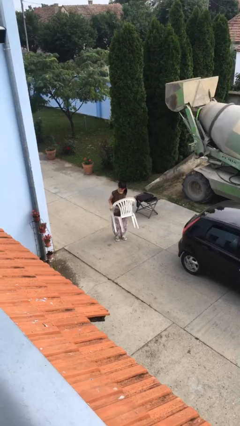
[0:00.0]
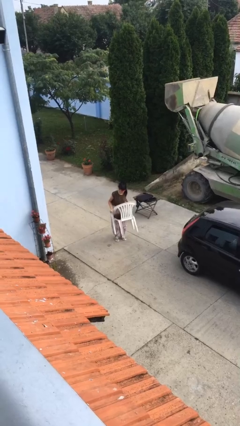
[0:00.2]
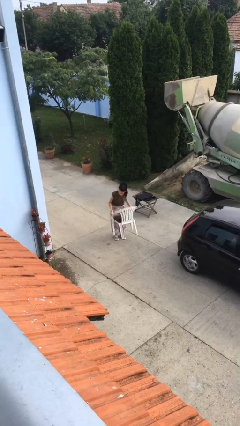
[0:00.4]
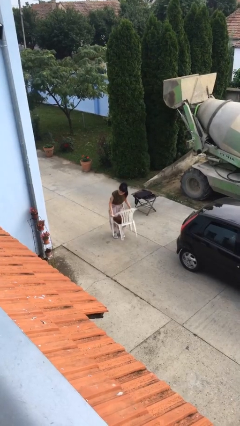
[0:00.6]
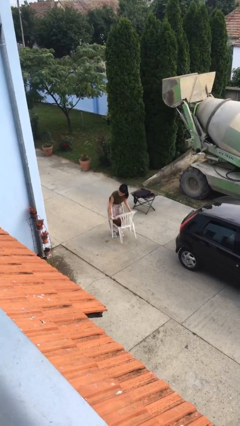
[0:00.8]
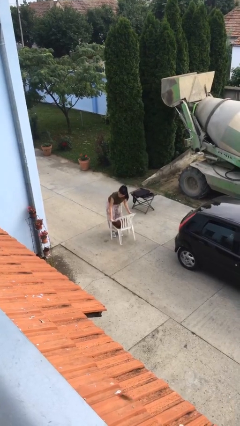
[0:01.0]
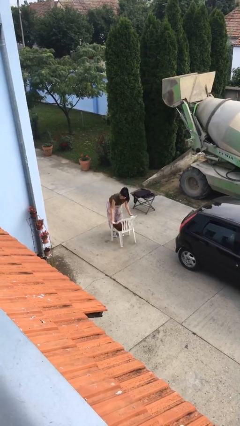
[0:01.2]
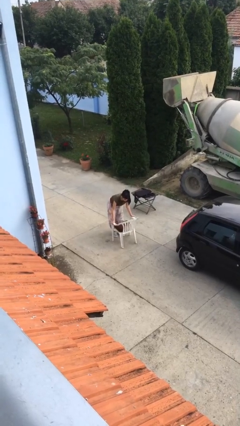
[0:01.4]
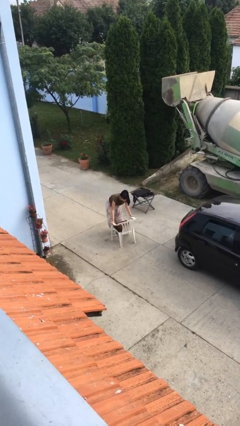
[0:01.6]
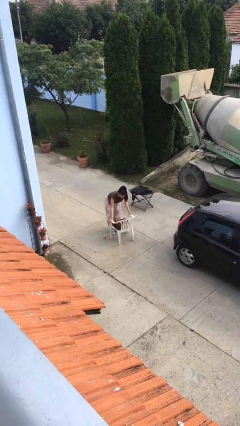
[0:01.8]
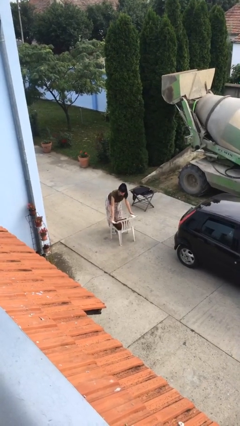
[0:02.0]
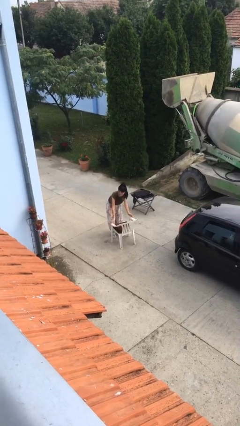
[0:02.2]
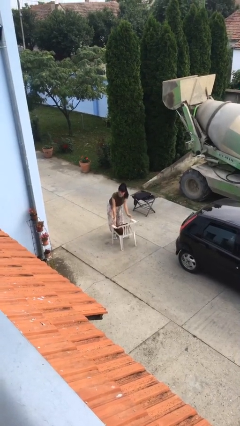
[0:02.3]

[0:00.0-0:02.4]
person puts down object on floor

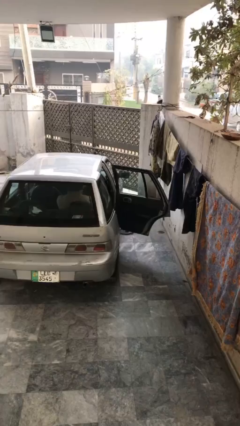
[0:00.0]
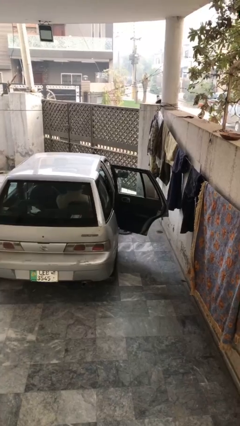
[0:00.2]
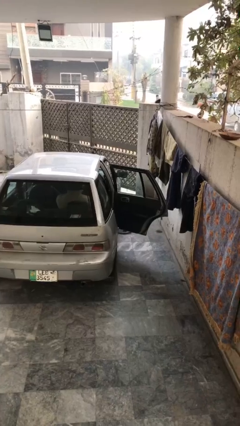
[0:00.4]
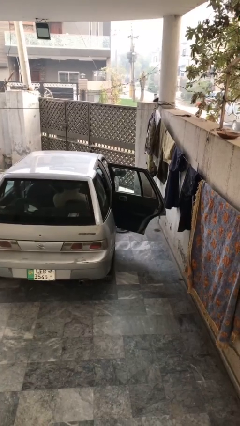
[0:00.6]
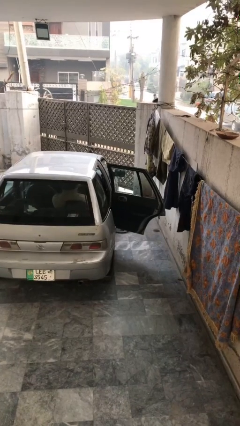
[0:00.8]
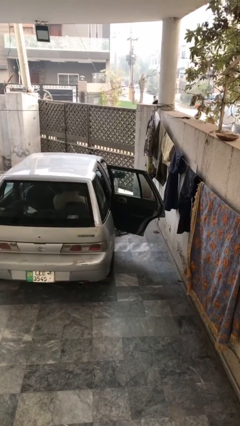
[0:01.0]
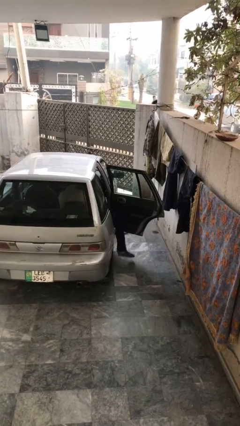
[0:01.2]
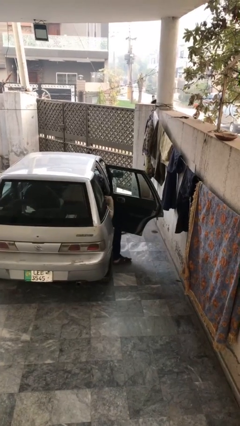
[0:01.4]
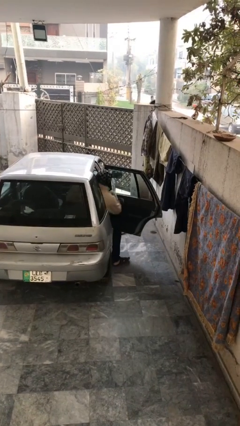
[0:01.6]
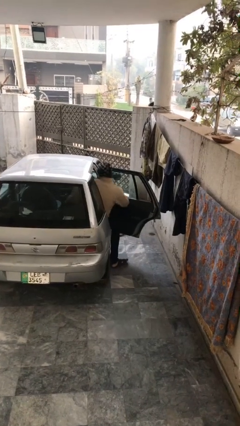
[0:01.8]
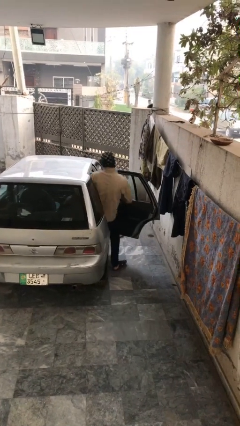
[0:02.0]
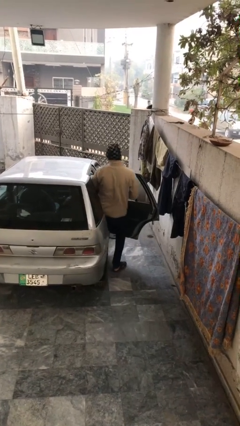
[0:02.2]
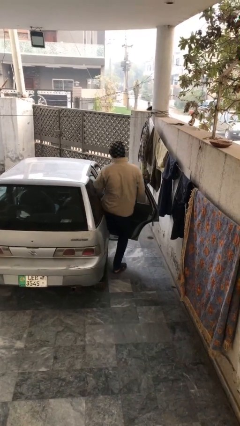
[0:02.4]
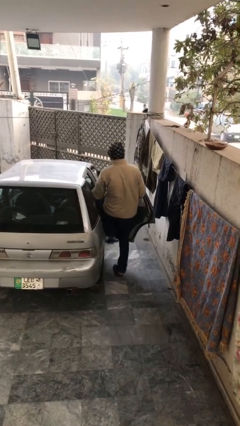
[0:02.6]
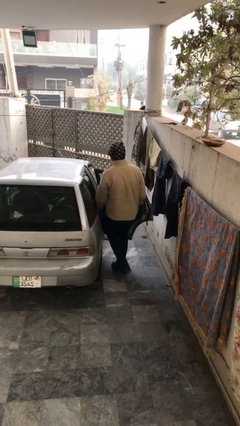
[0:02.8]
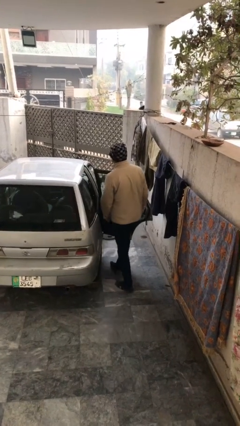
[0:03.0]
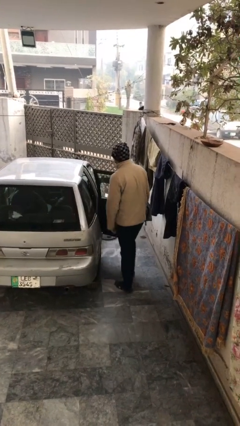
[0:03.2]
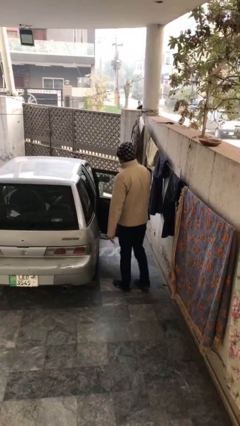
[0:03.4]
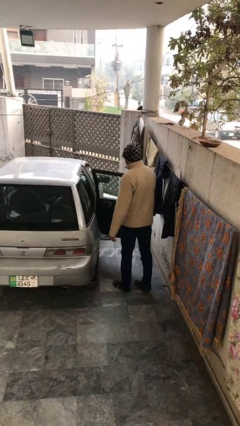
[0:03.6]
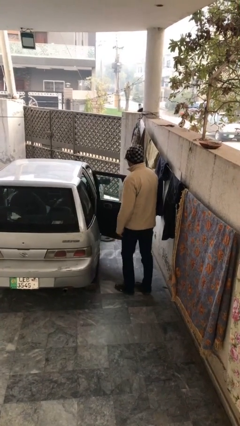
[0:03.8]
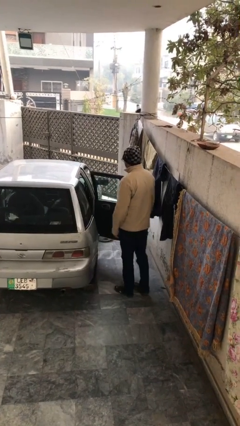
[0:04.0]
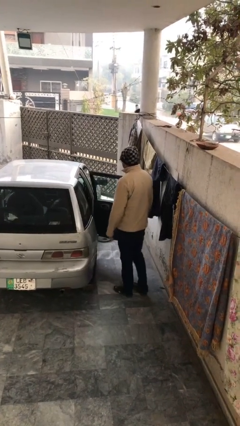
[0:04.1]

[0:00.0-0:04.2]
person exits car

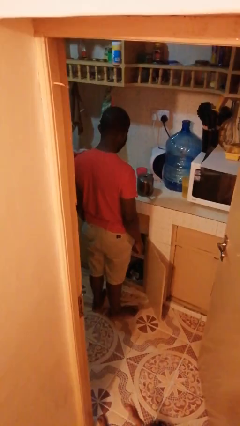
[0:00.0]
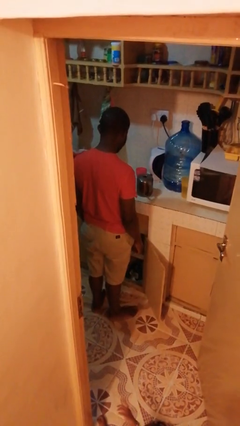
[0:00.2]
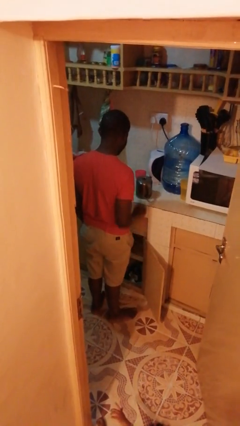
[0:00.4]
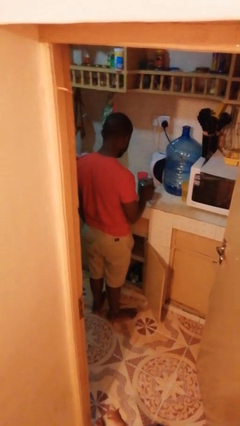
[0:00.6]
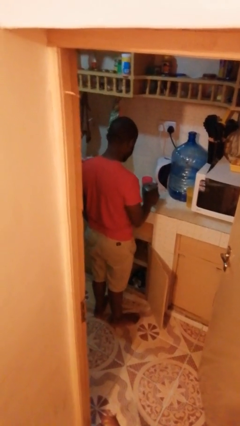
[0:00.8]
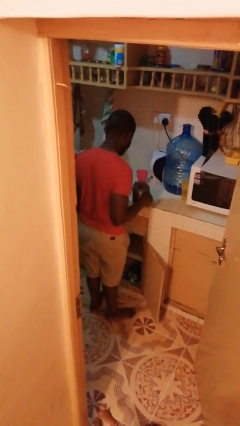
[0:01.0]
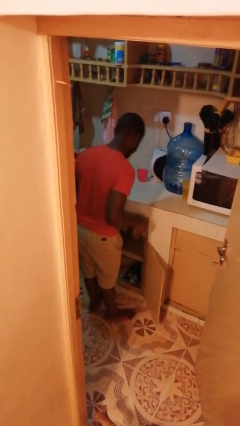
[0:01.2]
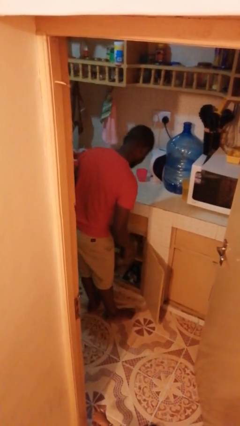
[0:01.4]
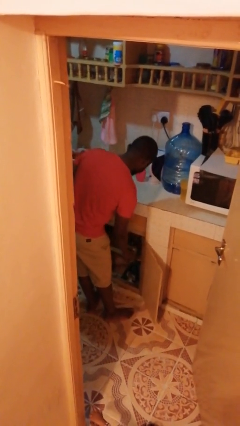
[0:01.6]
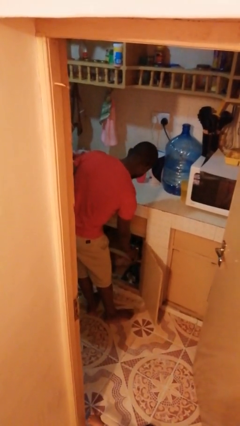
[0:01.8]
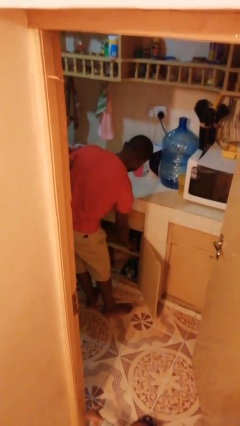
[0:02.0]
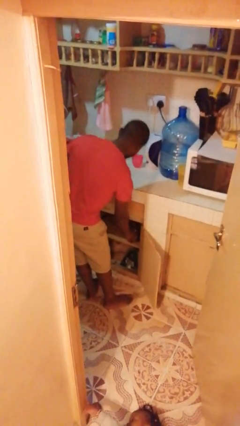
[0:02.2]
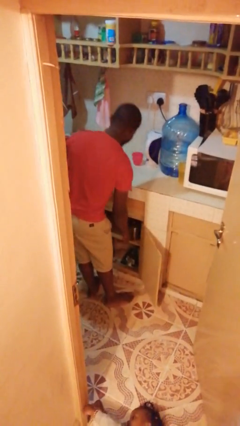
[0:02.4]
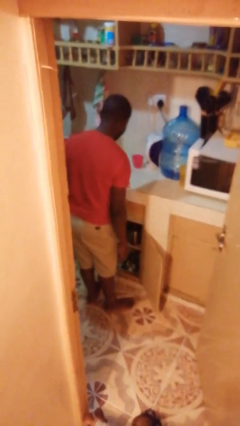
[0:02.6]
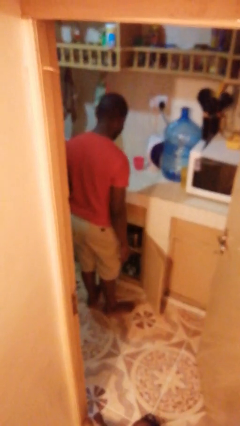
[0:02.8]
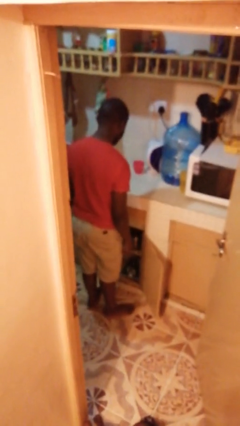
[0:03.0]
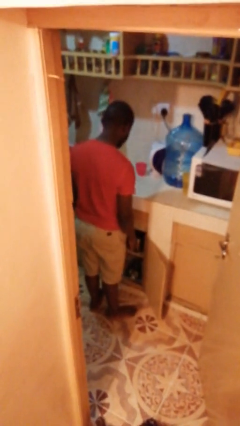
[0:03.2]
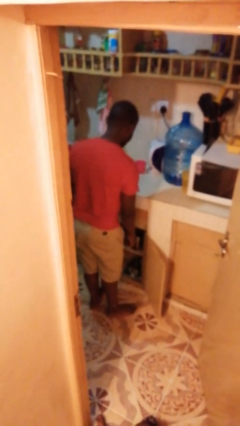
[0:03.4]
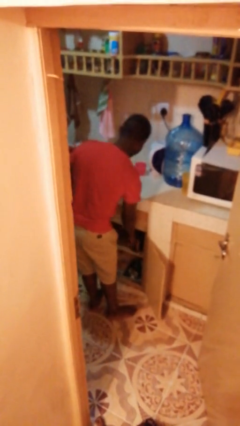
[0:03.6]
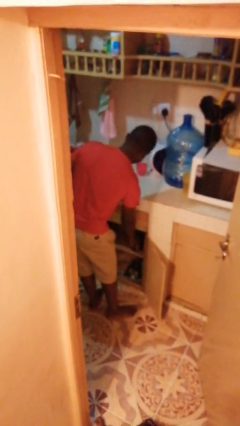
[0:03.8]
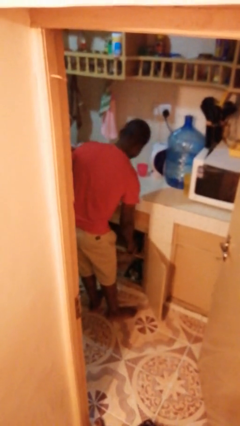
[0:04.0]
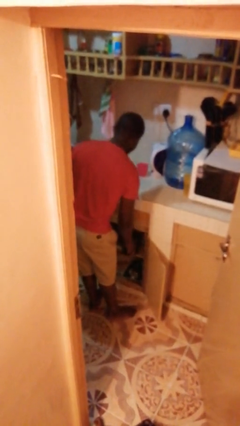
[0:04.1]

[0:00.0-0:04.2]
person puts object in cabinet

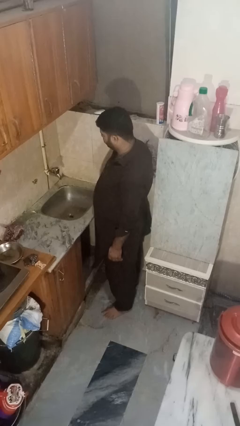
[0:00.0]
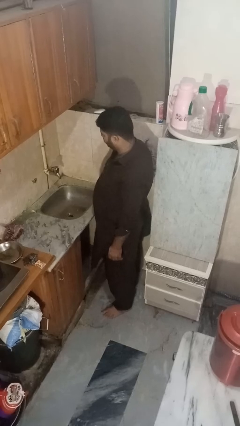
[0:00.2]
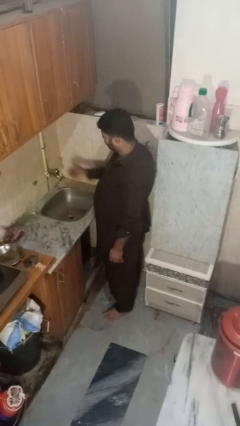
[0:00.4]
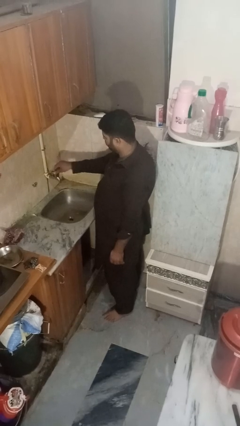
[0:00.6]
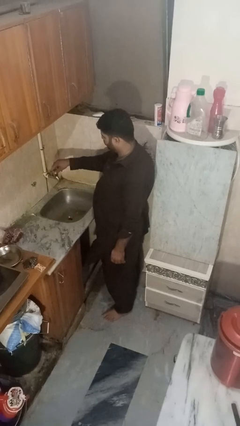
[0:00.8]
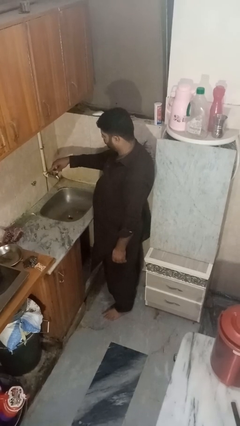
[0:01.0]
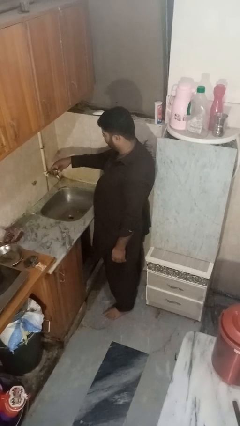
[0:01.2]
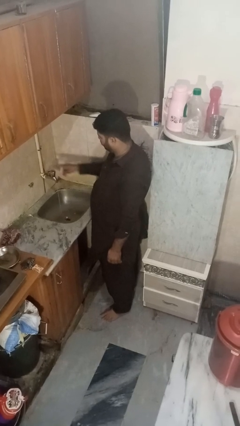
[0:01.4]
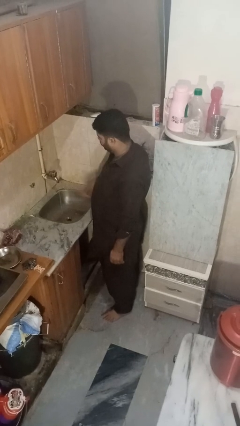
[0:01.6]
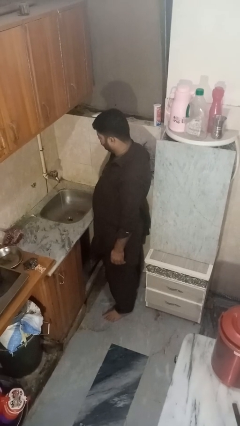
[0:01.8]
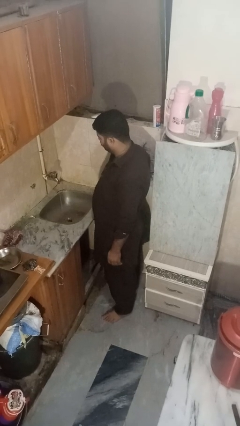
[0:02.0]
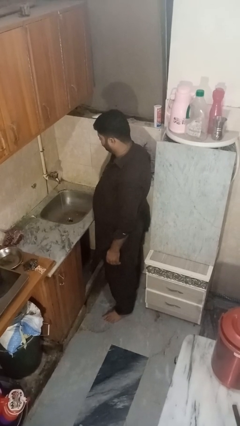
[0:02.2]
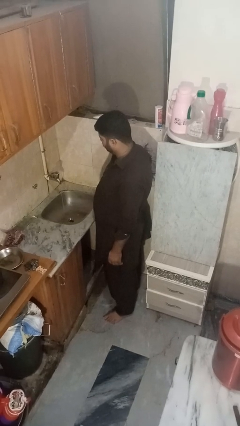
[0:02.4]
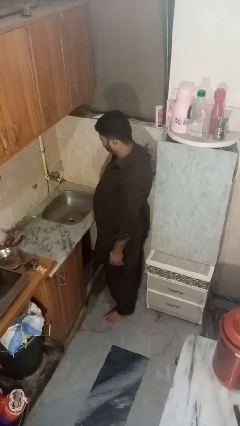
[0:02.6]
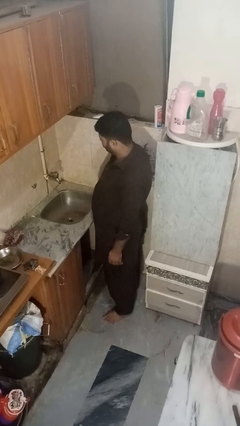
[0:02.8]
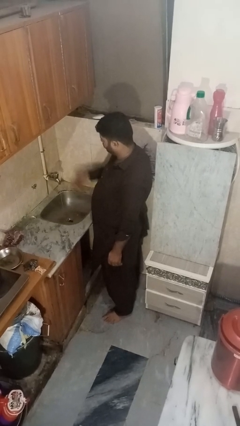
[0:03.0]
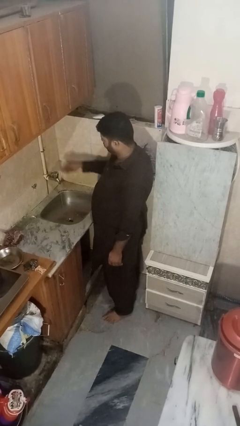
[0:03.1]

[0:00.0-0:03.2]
person turns on faucet

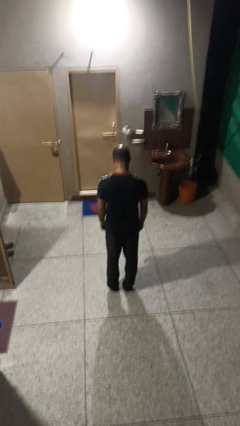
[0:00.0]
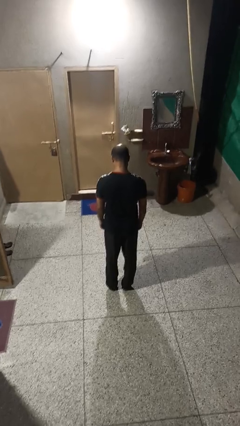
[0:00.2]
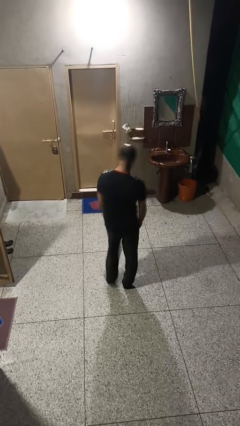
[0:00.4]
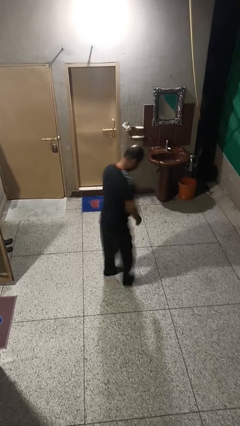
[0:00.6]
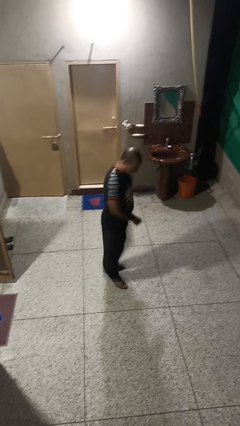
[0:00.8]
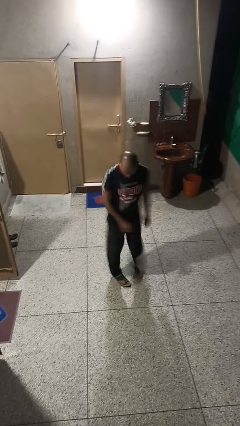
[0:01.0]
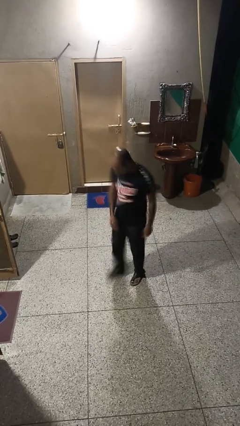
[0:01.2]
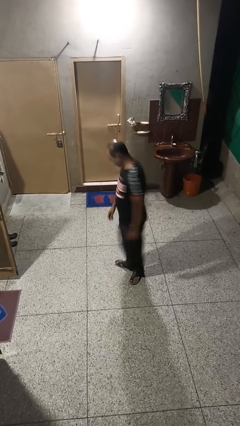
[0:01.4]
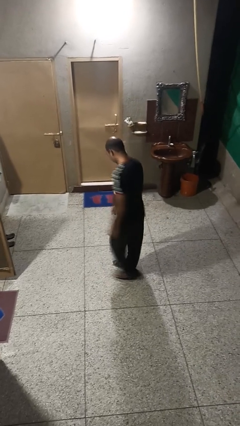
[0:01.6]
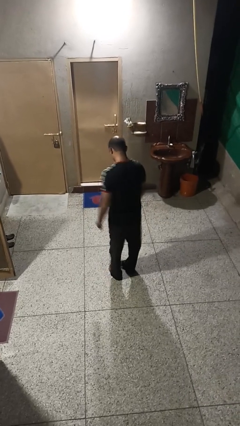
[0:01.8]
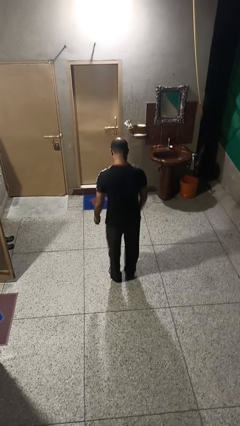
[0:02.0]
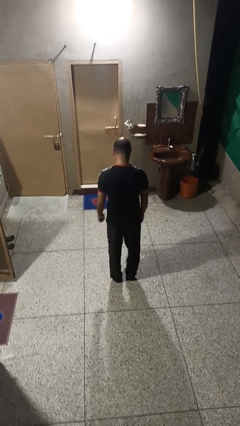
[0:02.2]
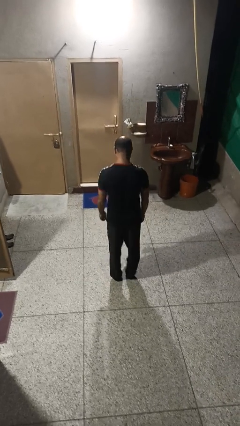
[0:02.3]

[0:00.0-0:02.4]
person twirls

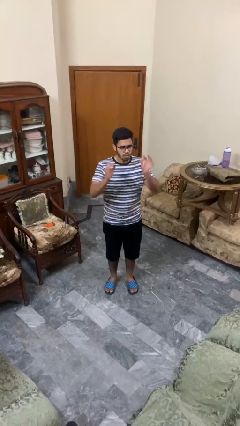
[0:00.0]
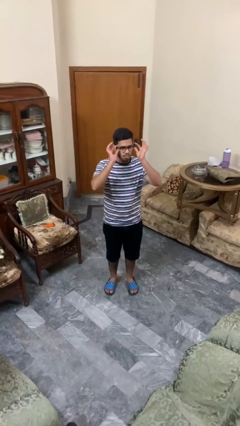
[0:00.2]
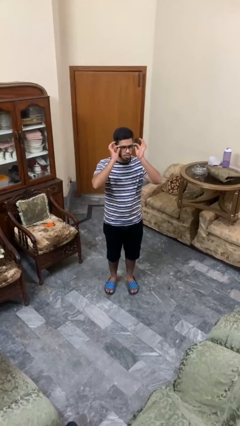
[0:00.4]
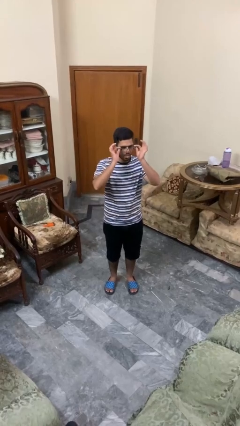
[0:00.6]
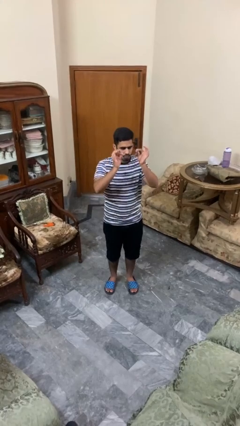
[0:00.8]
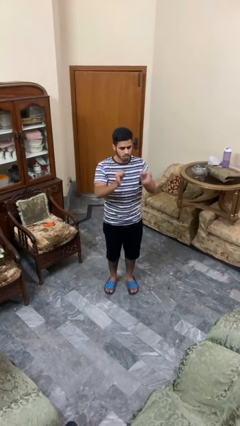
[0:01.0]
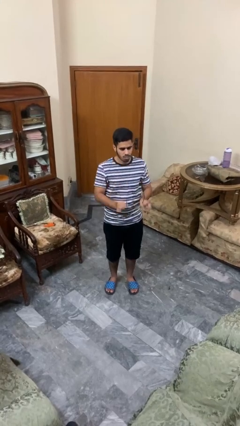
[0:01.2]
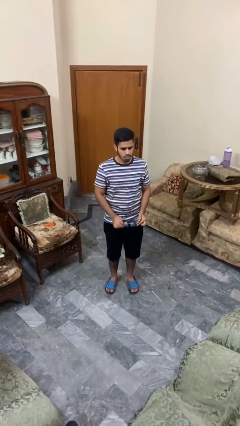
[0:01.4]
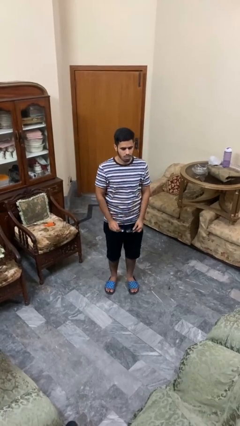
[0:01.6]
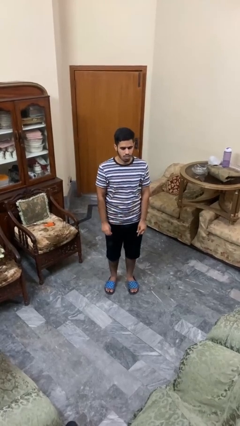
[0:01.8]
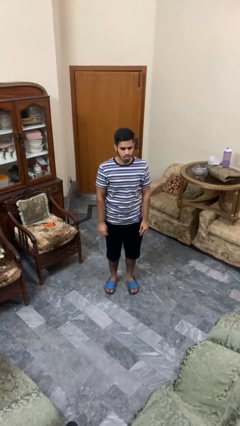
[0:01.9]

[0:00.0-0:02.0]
person takes off glasses
